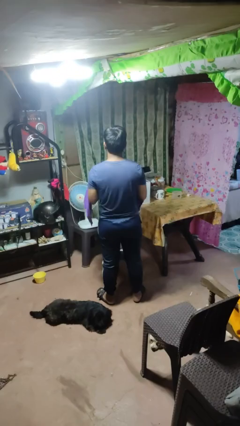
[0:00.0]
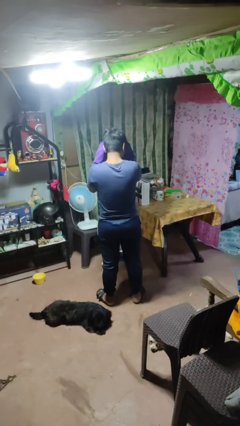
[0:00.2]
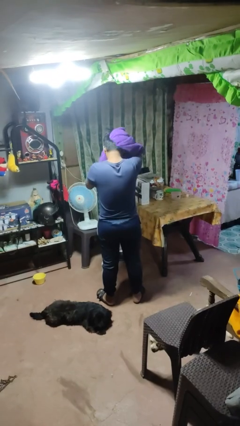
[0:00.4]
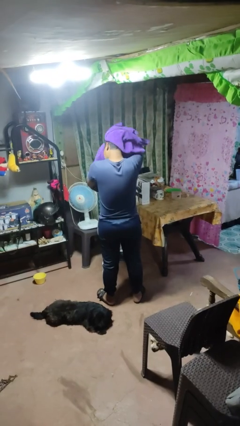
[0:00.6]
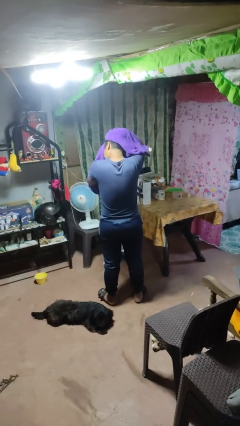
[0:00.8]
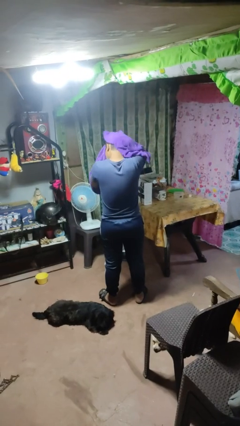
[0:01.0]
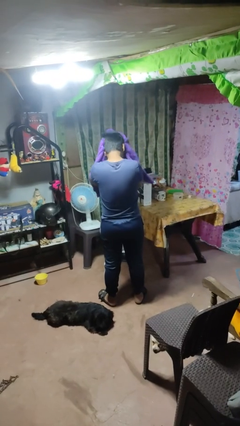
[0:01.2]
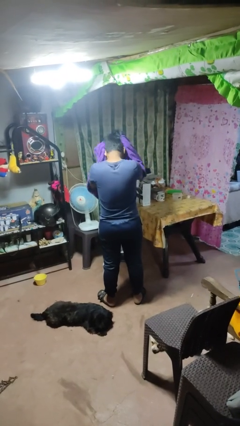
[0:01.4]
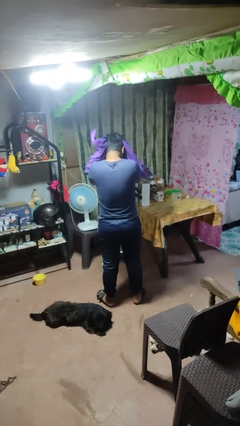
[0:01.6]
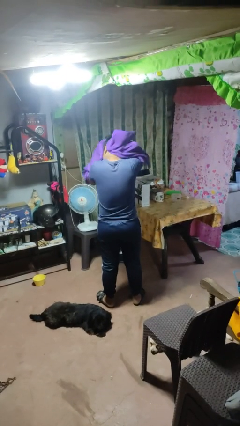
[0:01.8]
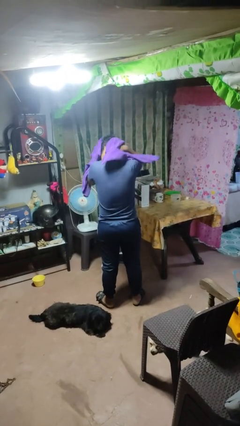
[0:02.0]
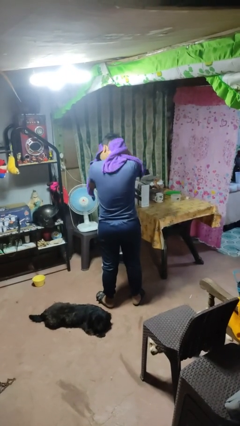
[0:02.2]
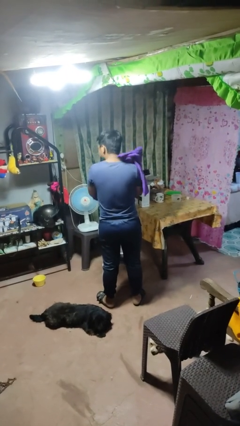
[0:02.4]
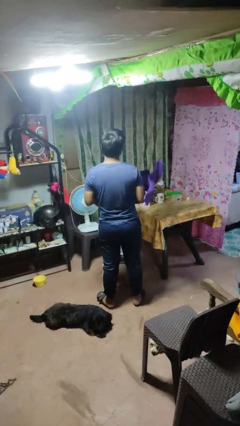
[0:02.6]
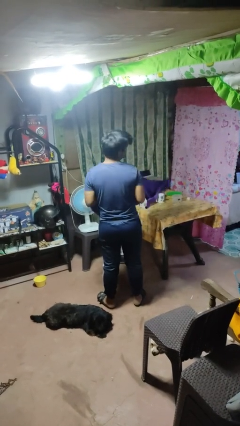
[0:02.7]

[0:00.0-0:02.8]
person dries hair with towel

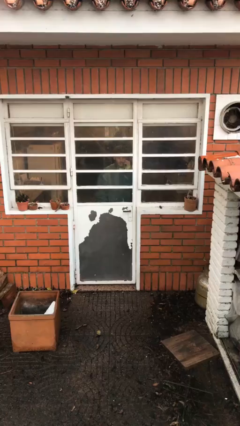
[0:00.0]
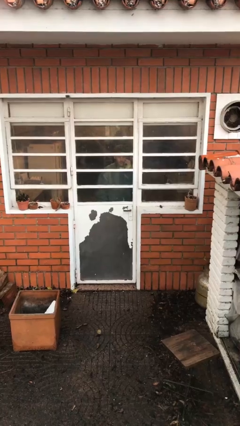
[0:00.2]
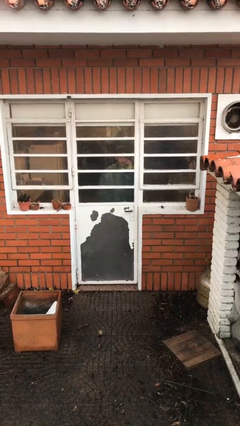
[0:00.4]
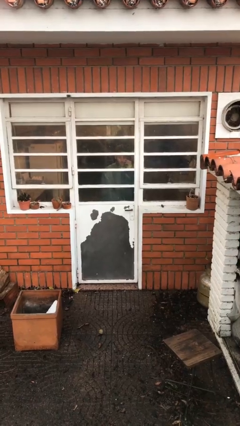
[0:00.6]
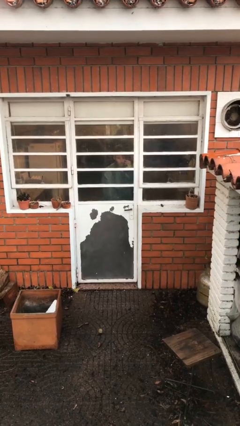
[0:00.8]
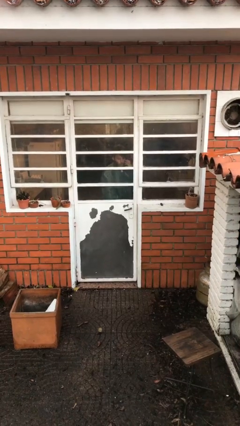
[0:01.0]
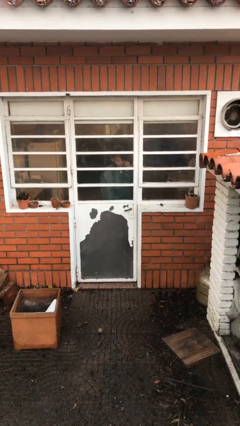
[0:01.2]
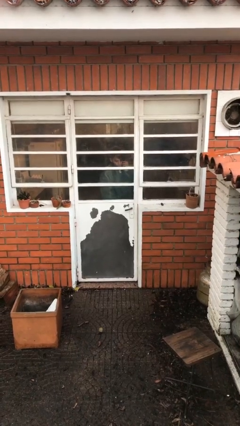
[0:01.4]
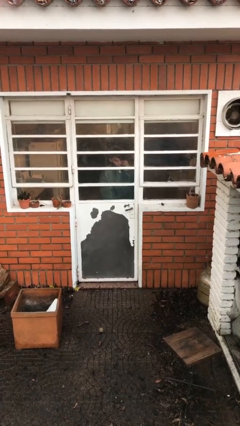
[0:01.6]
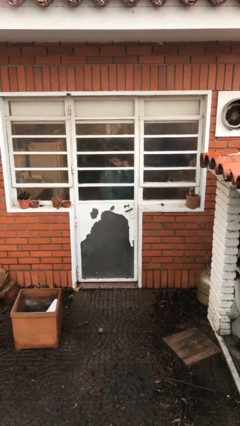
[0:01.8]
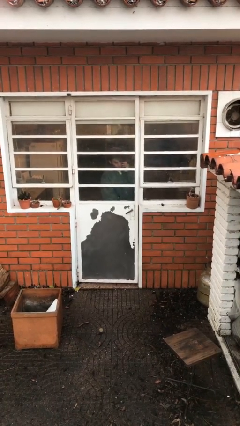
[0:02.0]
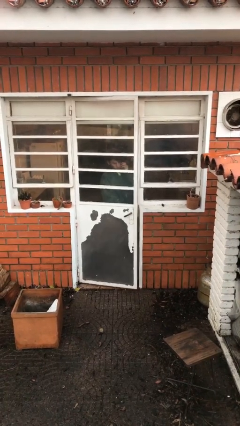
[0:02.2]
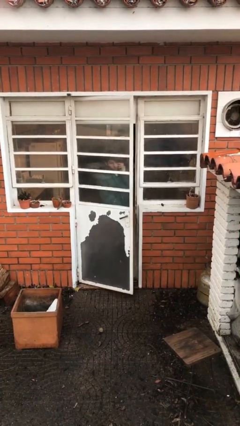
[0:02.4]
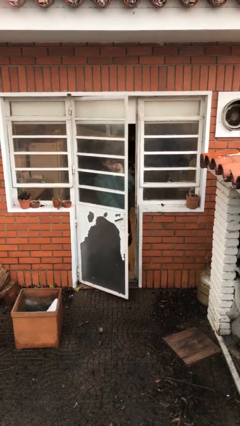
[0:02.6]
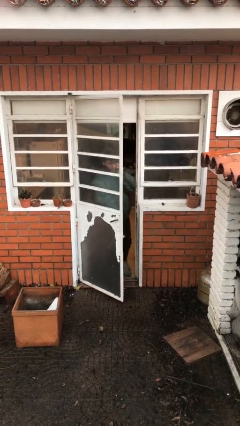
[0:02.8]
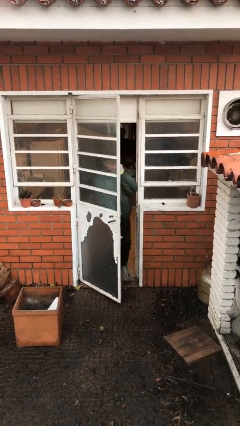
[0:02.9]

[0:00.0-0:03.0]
person opens facility door

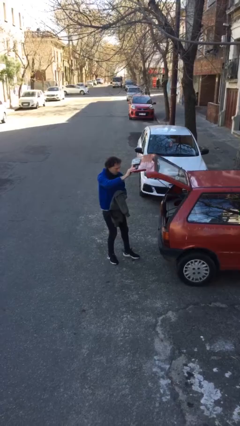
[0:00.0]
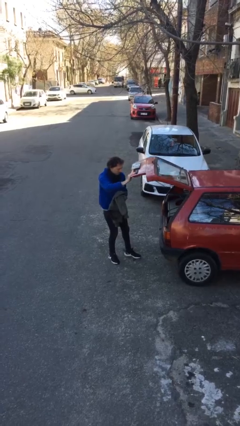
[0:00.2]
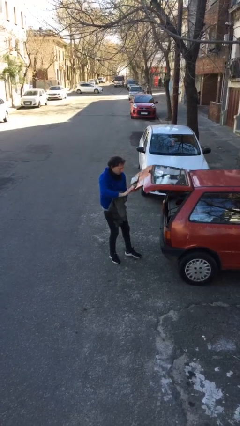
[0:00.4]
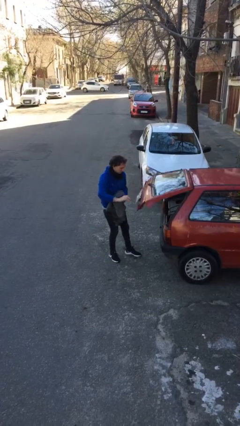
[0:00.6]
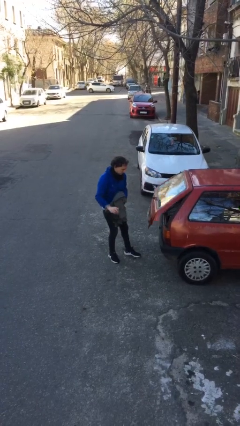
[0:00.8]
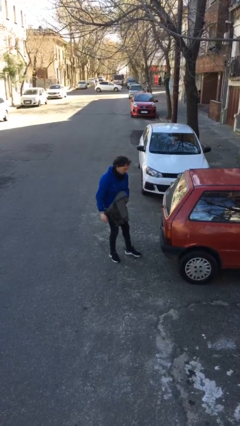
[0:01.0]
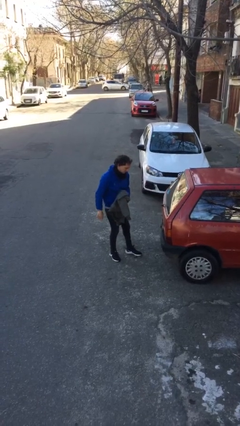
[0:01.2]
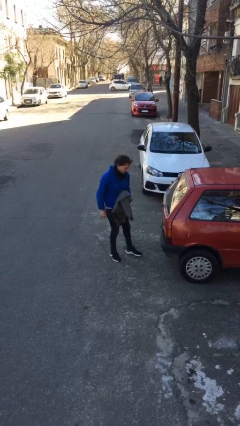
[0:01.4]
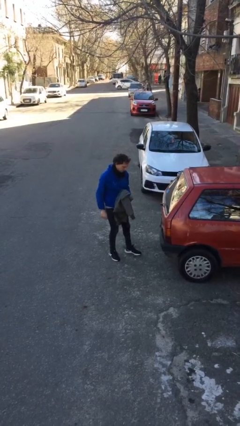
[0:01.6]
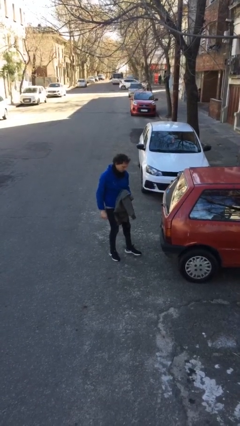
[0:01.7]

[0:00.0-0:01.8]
person closes car door

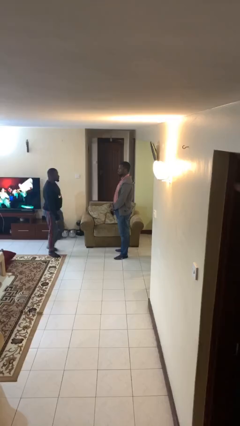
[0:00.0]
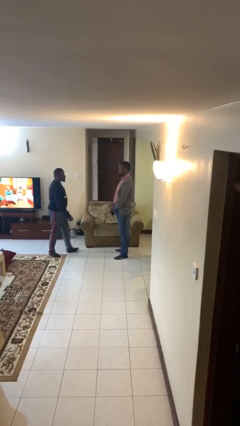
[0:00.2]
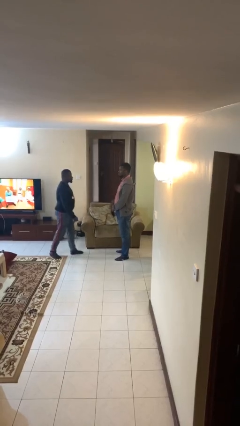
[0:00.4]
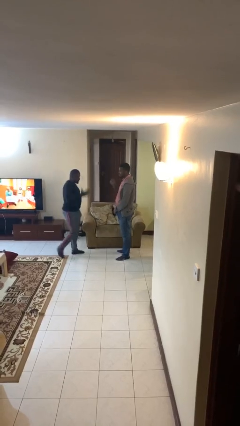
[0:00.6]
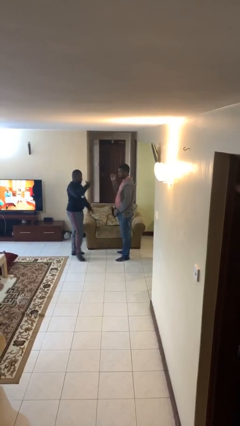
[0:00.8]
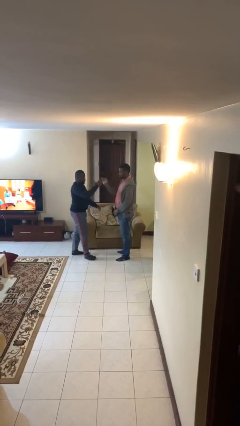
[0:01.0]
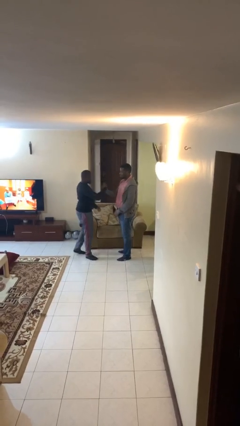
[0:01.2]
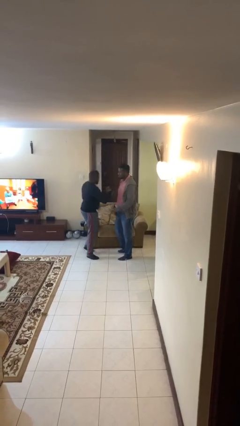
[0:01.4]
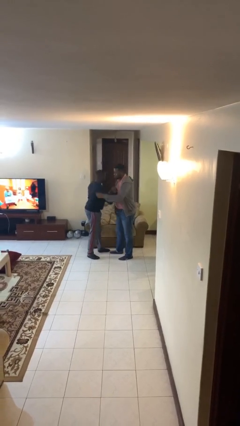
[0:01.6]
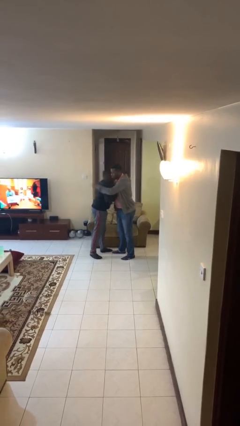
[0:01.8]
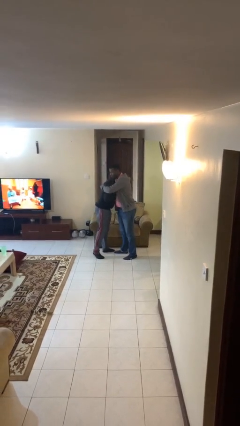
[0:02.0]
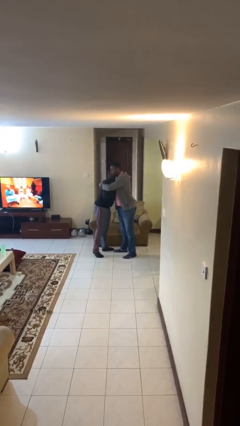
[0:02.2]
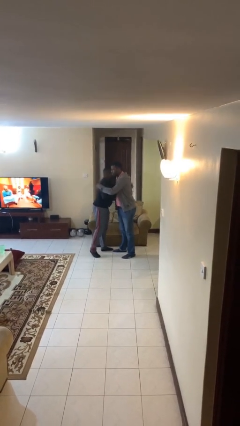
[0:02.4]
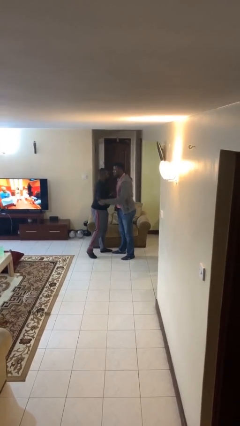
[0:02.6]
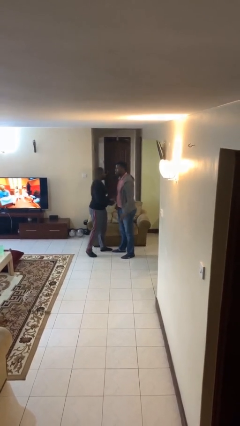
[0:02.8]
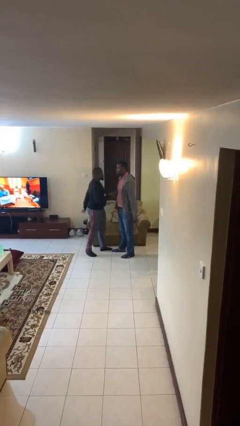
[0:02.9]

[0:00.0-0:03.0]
person embraces person

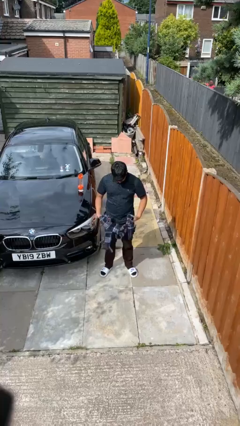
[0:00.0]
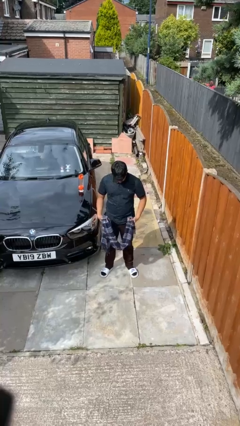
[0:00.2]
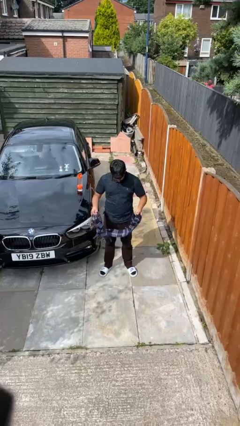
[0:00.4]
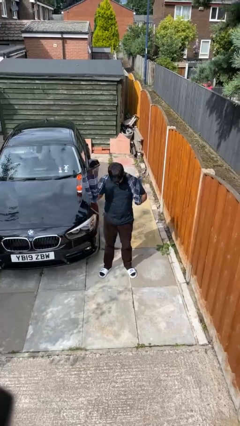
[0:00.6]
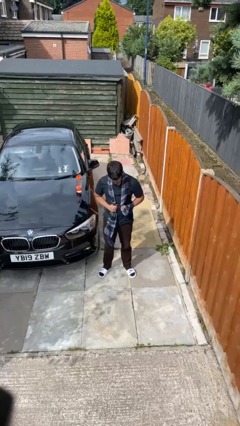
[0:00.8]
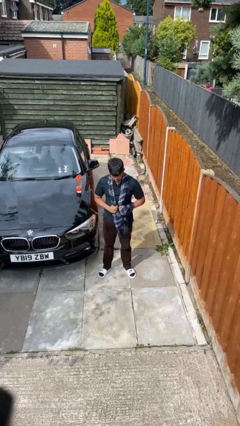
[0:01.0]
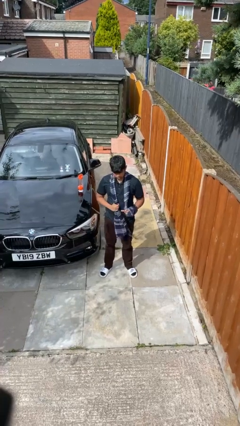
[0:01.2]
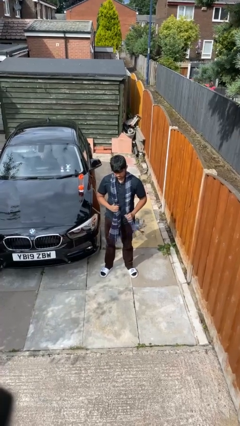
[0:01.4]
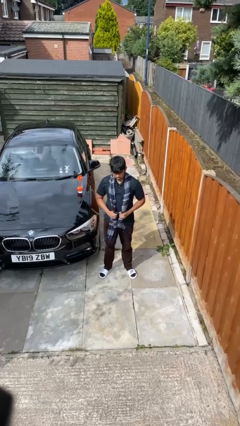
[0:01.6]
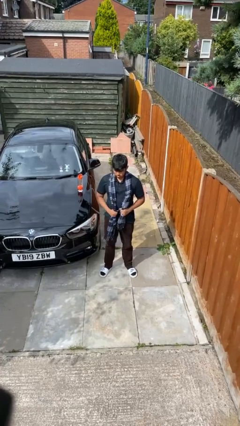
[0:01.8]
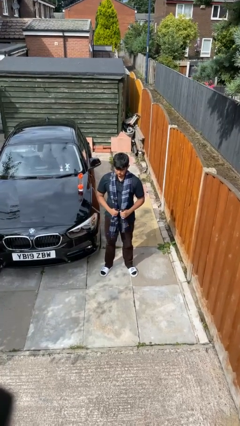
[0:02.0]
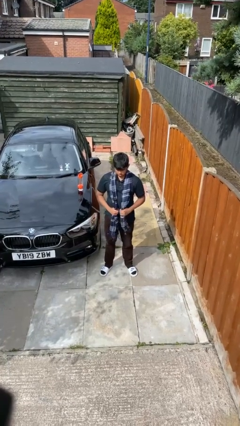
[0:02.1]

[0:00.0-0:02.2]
person puts on scarf

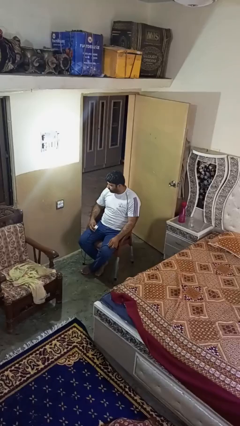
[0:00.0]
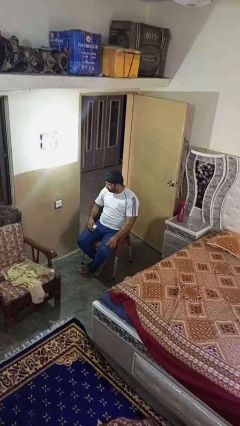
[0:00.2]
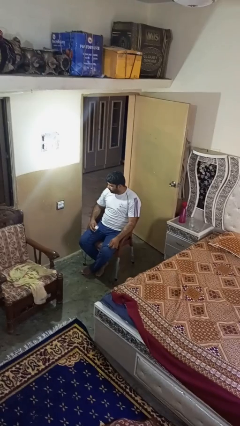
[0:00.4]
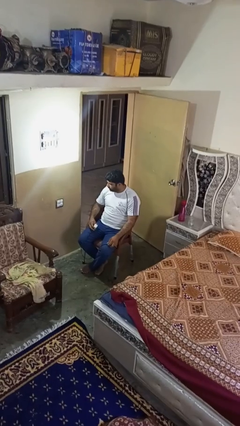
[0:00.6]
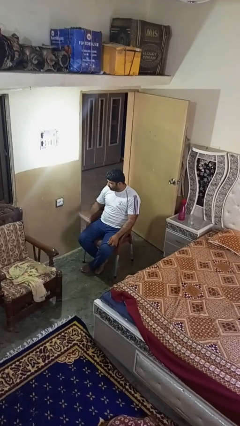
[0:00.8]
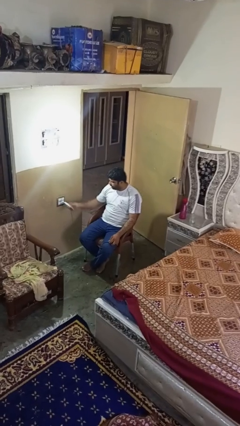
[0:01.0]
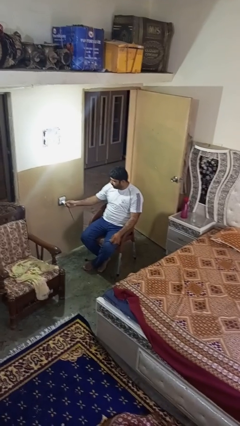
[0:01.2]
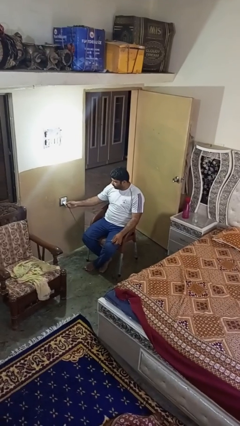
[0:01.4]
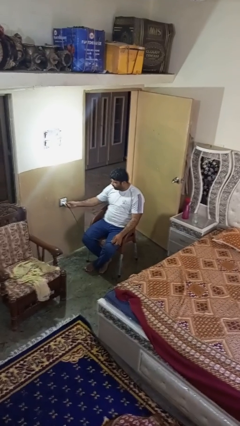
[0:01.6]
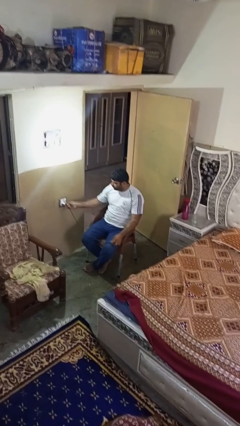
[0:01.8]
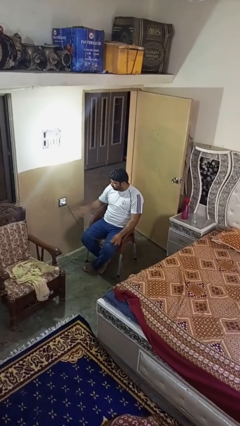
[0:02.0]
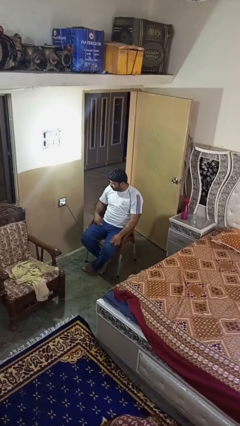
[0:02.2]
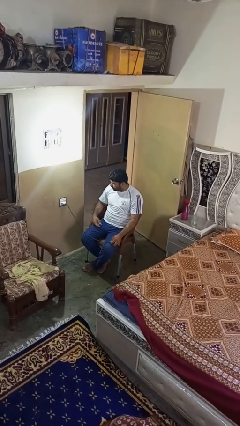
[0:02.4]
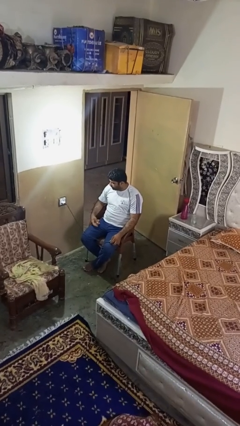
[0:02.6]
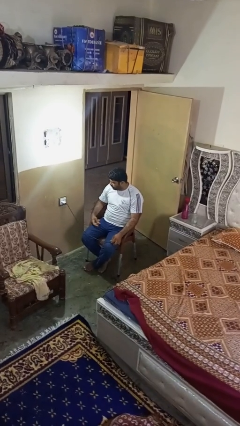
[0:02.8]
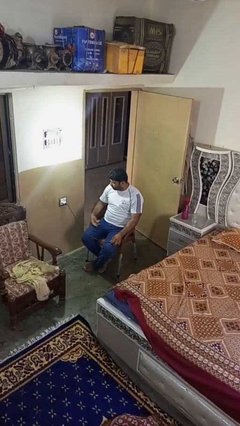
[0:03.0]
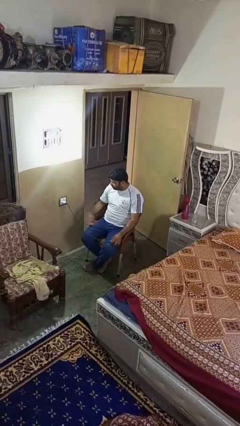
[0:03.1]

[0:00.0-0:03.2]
person plugs into electrical socket

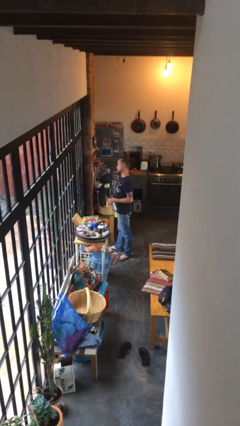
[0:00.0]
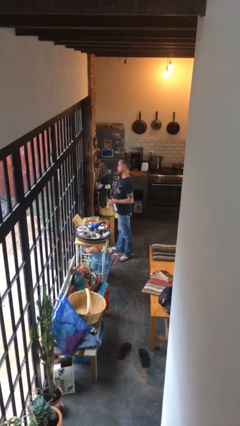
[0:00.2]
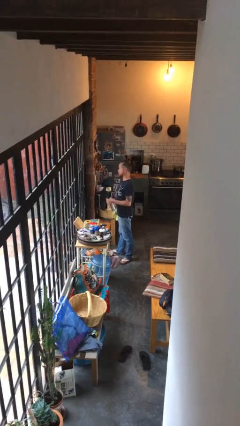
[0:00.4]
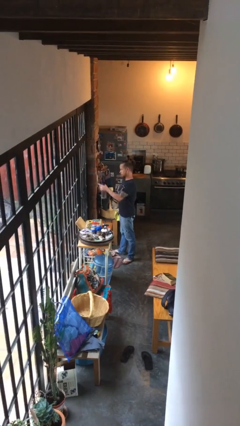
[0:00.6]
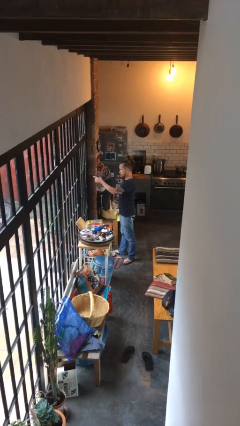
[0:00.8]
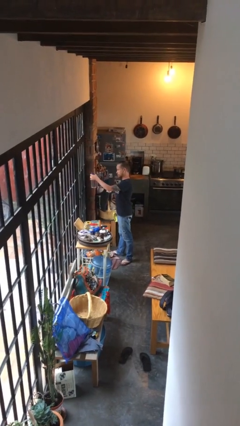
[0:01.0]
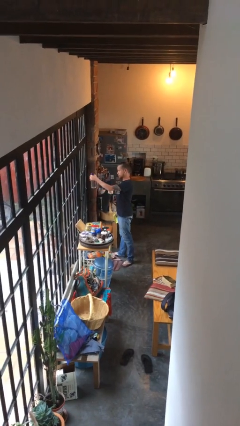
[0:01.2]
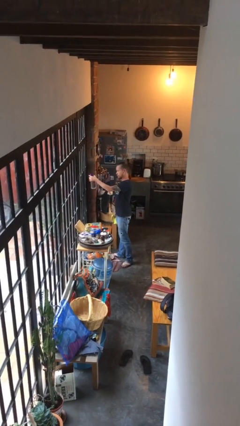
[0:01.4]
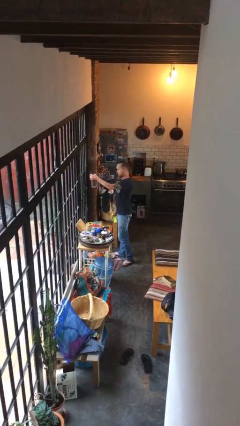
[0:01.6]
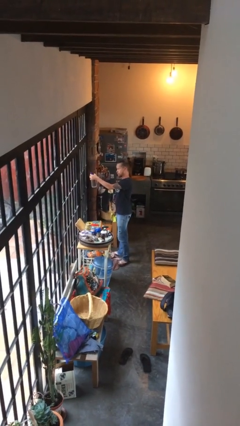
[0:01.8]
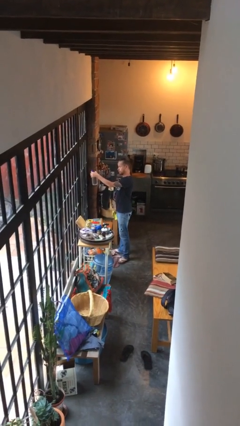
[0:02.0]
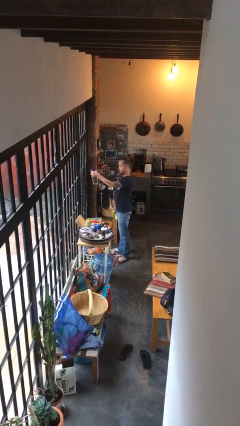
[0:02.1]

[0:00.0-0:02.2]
person sprays from bottle
